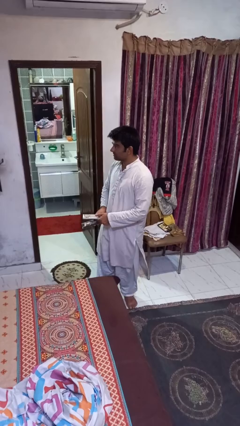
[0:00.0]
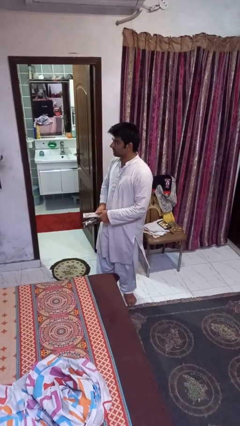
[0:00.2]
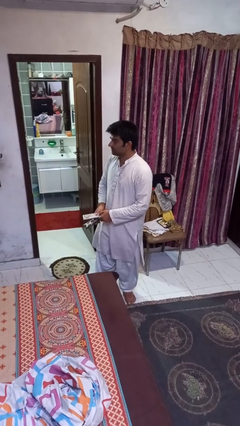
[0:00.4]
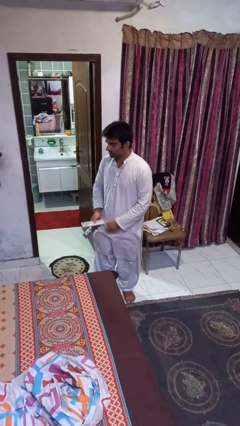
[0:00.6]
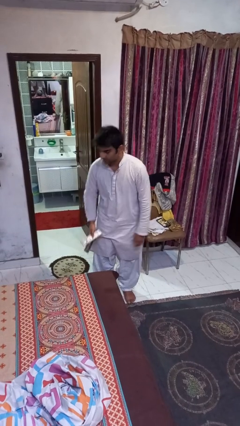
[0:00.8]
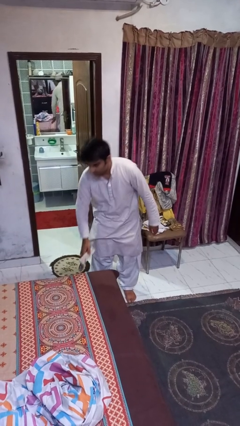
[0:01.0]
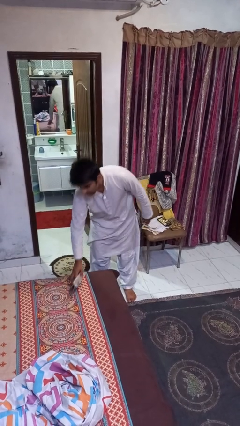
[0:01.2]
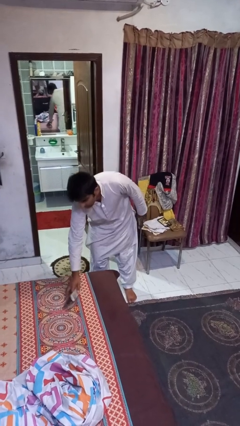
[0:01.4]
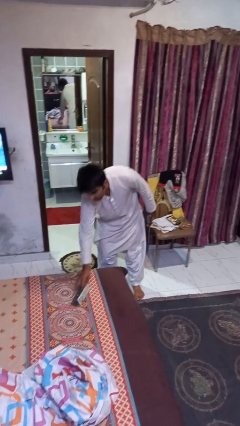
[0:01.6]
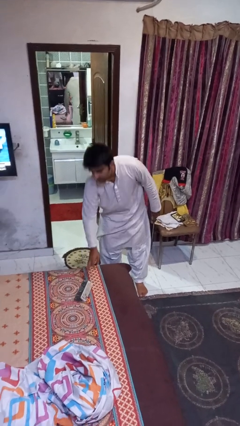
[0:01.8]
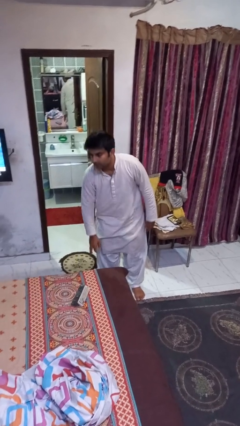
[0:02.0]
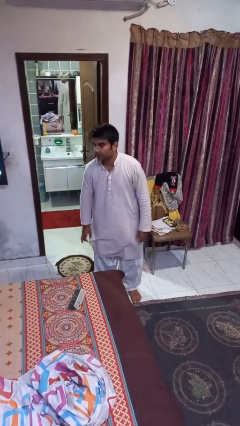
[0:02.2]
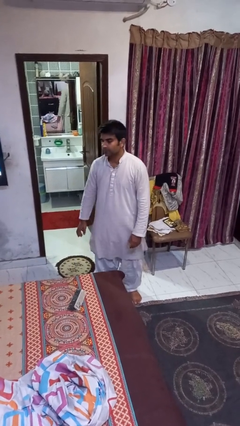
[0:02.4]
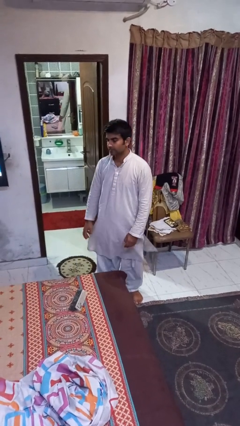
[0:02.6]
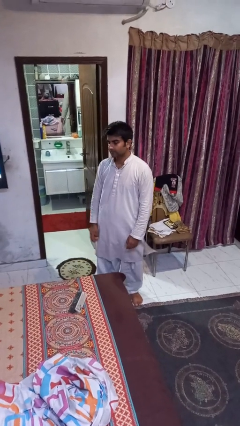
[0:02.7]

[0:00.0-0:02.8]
person puts down object on bed

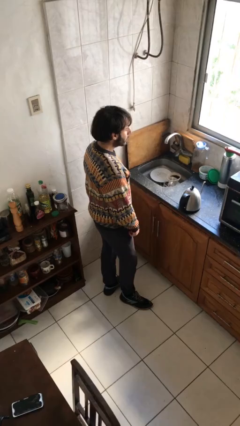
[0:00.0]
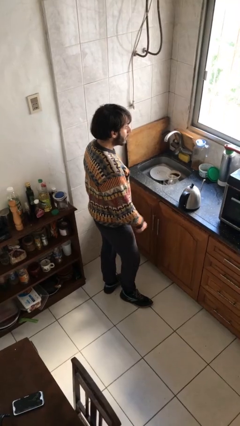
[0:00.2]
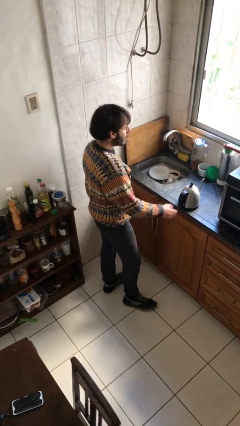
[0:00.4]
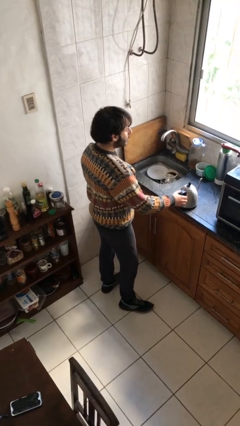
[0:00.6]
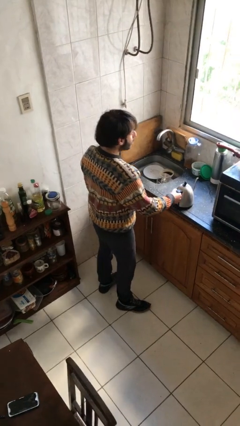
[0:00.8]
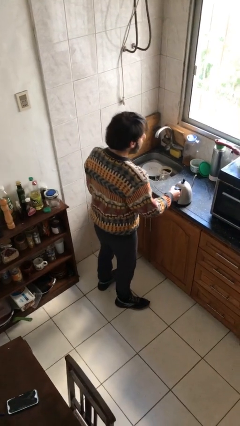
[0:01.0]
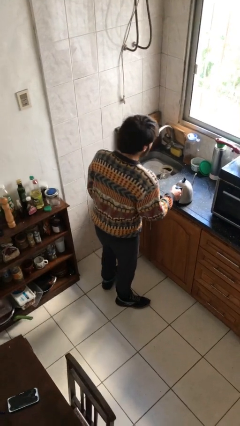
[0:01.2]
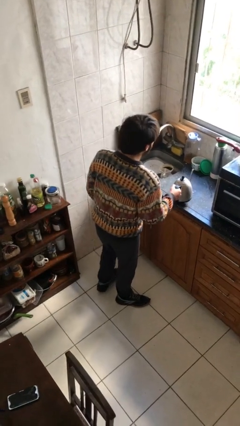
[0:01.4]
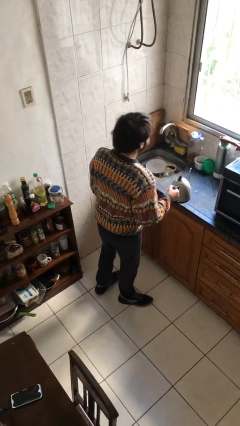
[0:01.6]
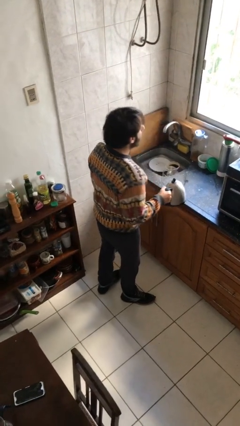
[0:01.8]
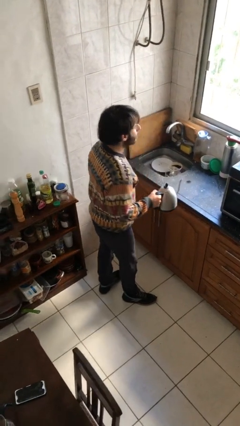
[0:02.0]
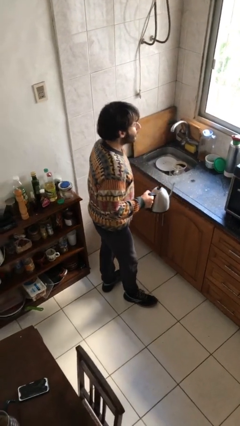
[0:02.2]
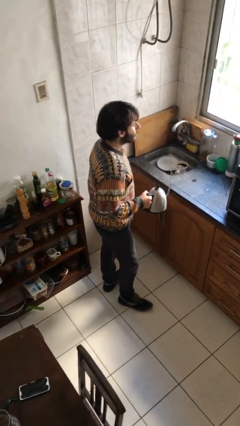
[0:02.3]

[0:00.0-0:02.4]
person picks up object from countertop

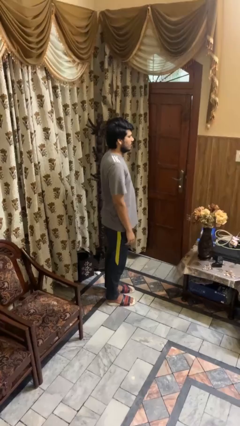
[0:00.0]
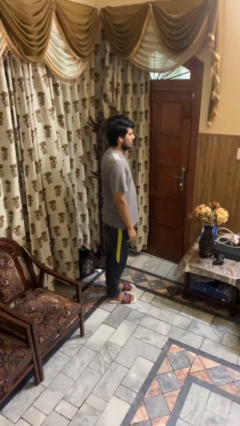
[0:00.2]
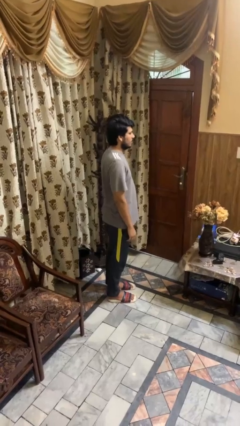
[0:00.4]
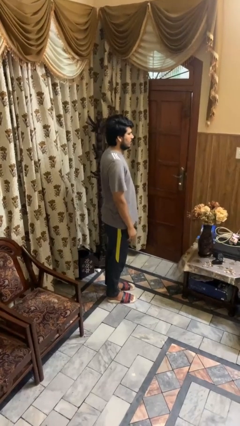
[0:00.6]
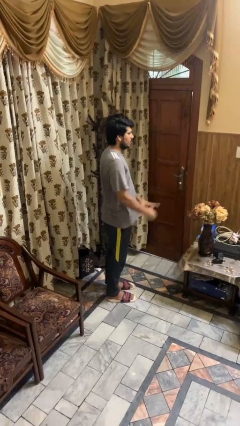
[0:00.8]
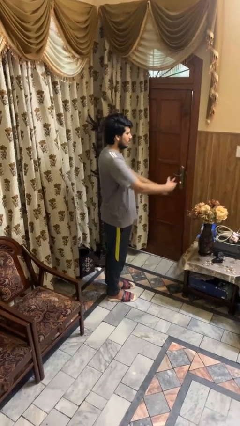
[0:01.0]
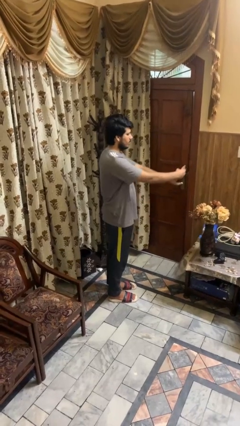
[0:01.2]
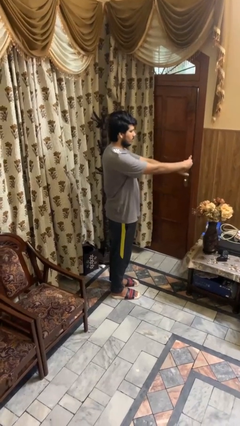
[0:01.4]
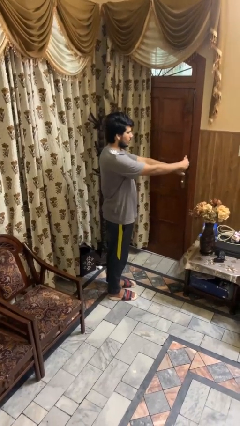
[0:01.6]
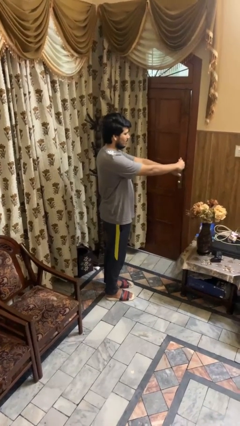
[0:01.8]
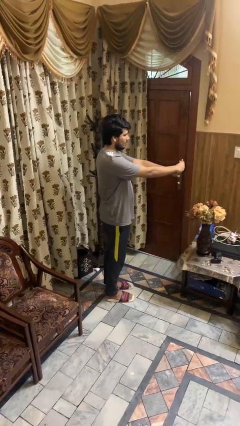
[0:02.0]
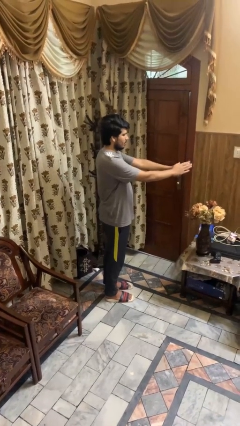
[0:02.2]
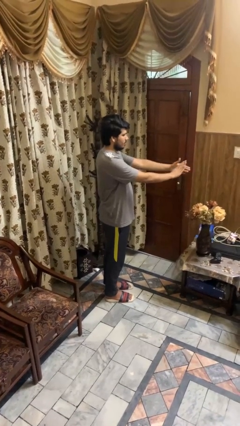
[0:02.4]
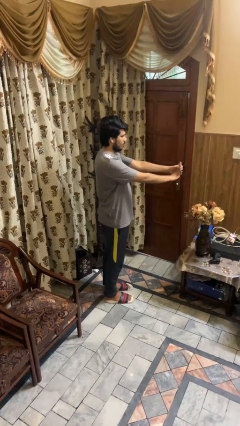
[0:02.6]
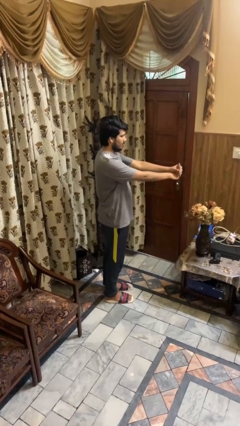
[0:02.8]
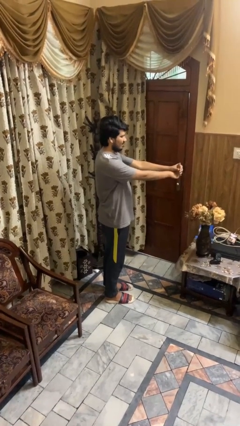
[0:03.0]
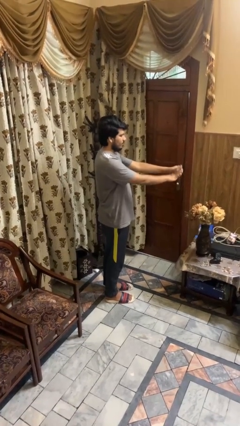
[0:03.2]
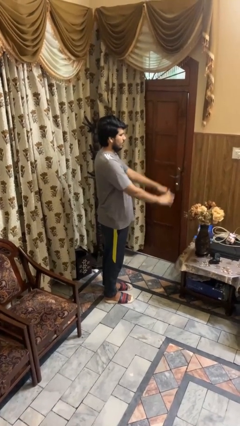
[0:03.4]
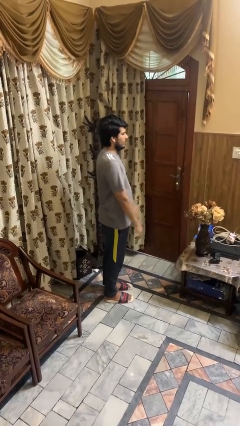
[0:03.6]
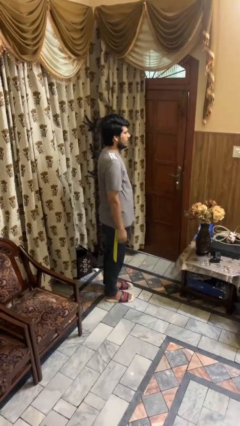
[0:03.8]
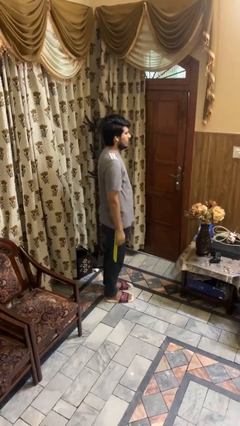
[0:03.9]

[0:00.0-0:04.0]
person cracks knuckles

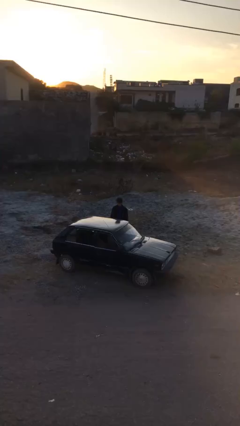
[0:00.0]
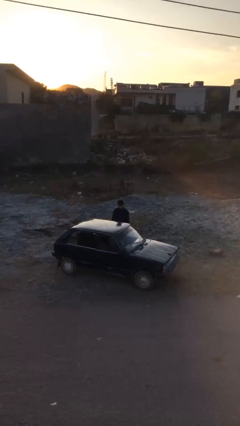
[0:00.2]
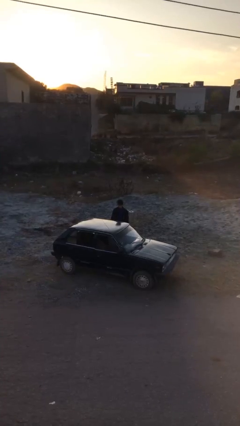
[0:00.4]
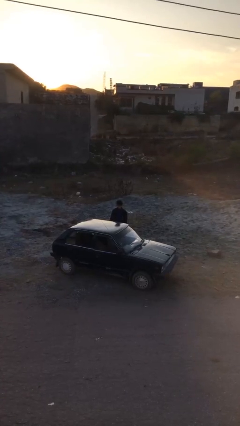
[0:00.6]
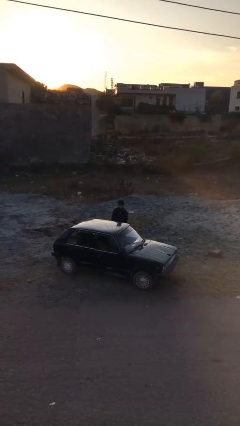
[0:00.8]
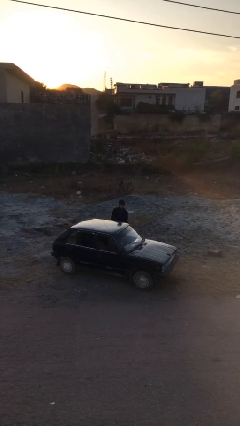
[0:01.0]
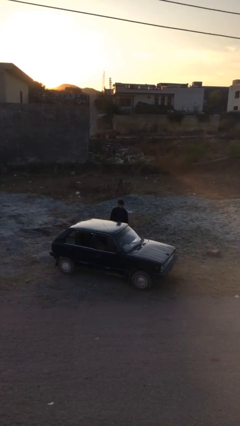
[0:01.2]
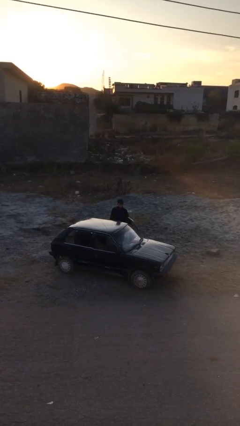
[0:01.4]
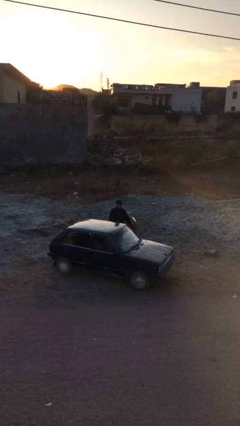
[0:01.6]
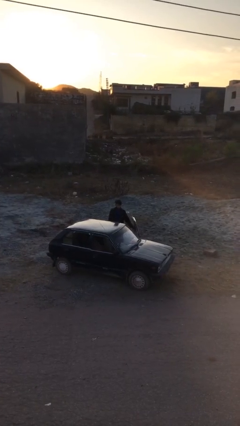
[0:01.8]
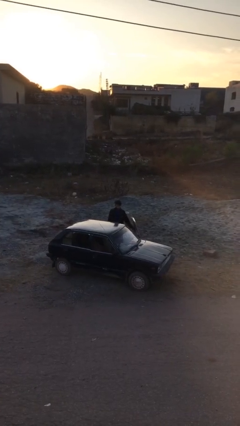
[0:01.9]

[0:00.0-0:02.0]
person opens car door

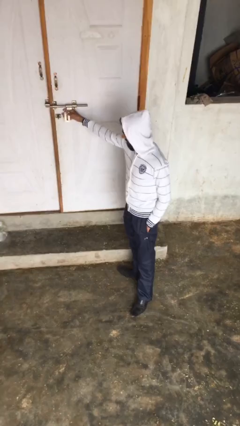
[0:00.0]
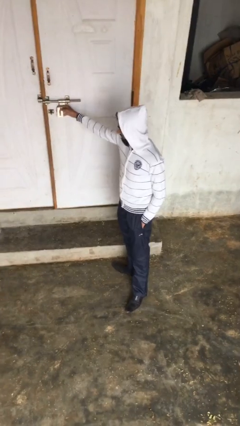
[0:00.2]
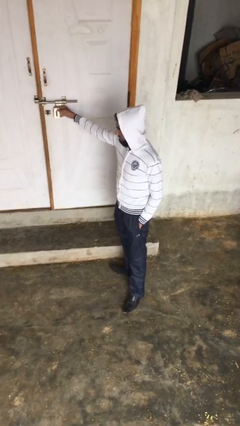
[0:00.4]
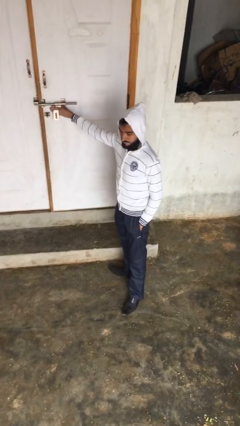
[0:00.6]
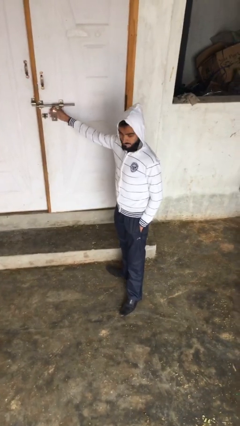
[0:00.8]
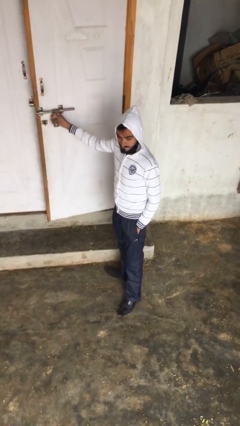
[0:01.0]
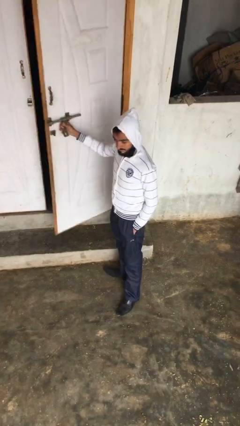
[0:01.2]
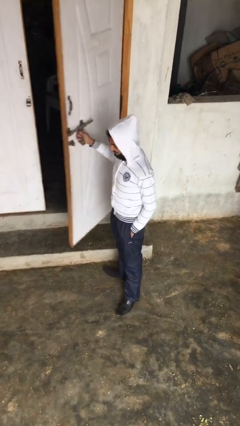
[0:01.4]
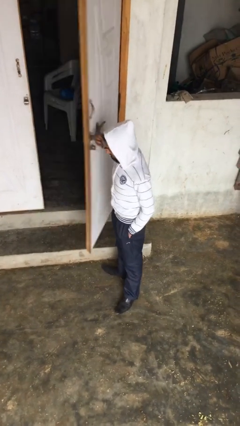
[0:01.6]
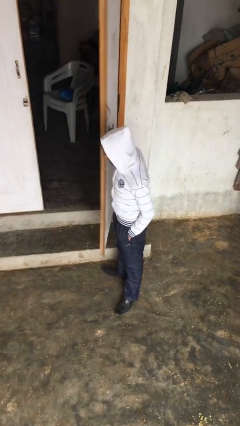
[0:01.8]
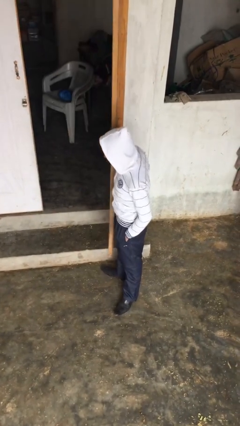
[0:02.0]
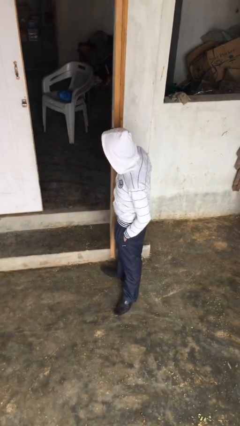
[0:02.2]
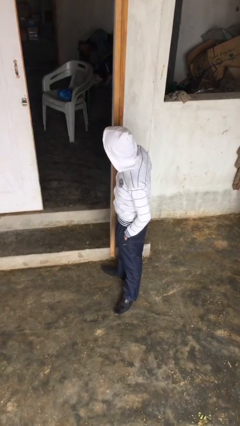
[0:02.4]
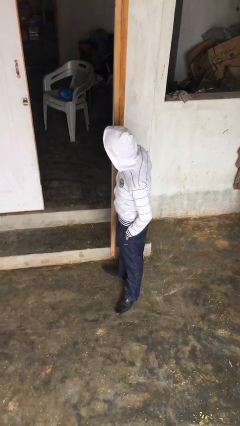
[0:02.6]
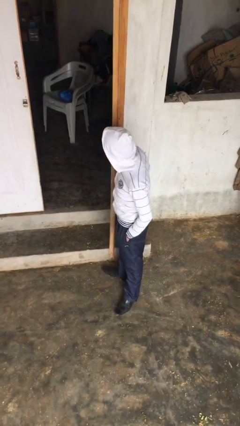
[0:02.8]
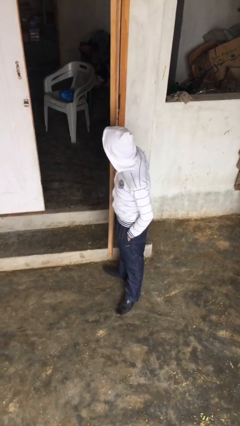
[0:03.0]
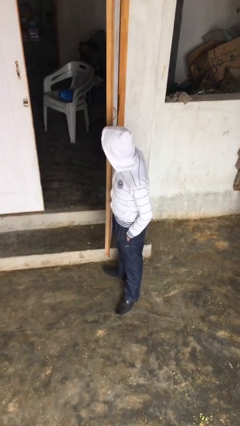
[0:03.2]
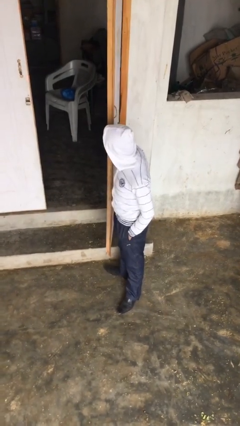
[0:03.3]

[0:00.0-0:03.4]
person opens facility door

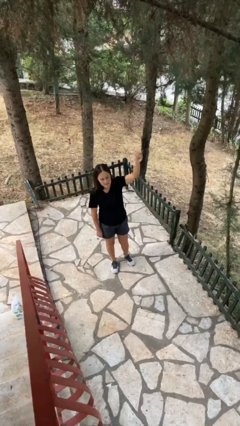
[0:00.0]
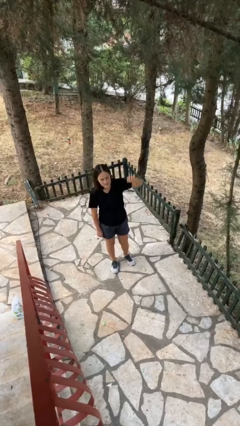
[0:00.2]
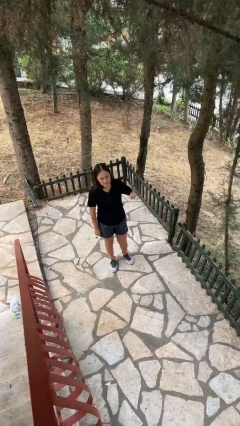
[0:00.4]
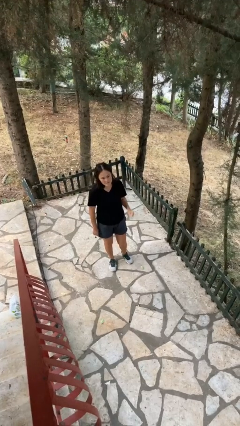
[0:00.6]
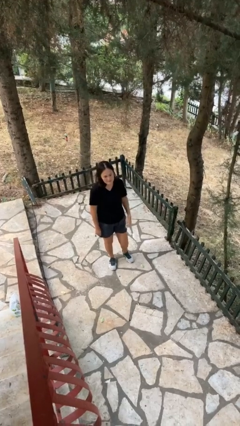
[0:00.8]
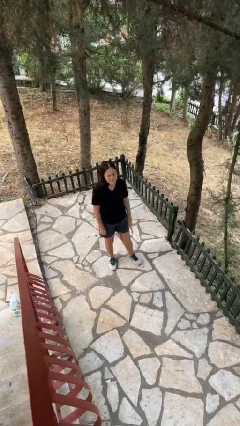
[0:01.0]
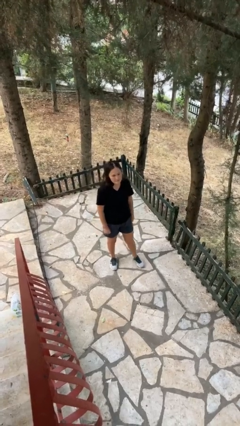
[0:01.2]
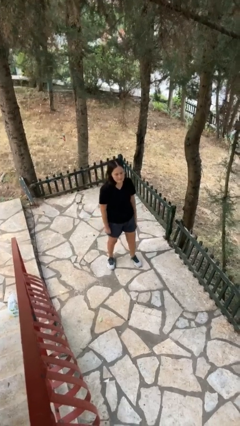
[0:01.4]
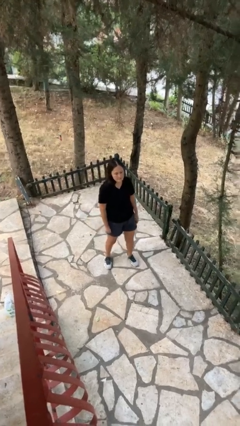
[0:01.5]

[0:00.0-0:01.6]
person gestures lower hand

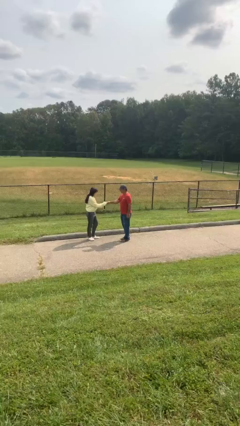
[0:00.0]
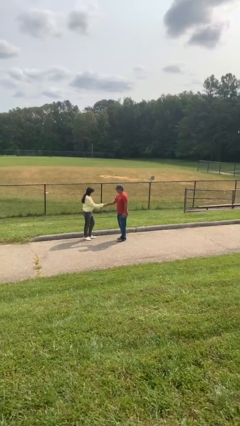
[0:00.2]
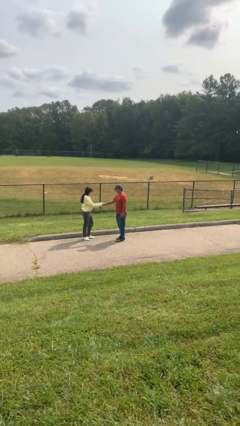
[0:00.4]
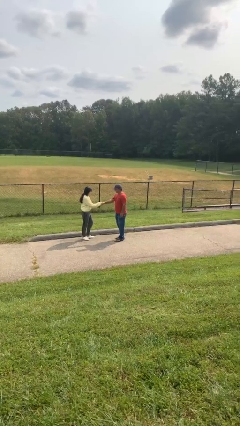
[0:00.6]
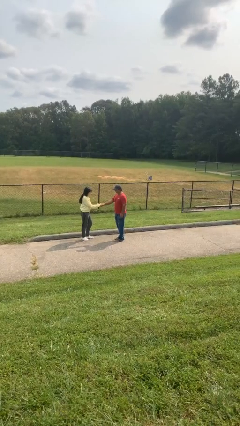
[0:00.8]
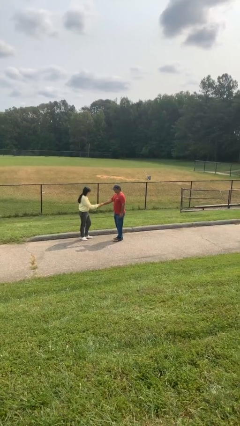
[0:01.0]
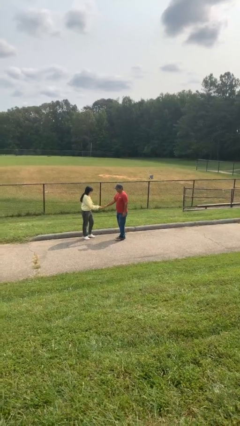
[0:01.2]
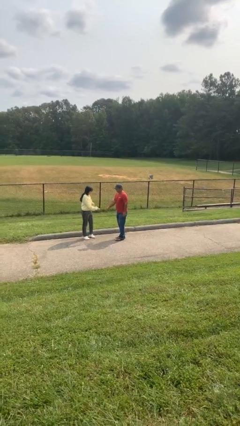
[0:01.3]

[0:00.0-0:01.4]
person shakes hand
